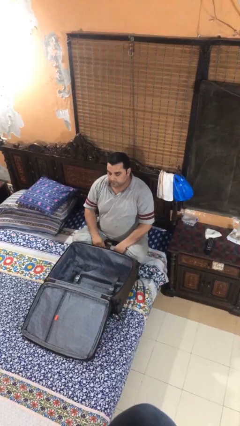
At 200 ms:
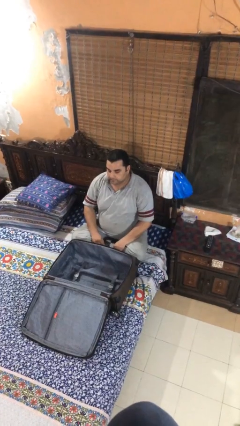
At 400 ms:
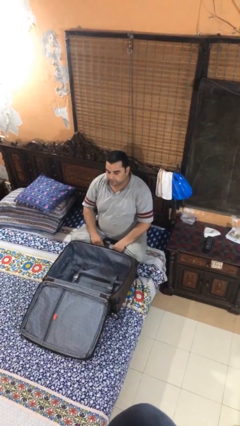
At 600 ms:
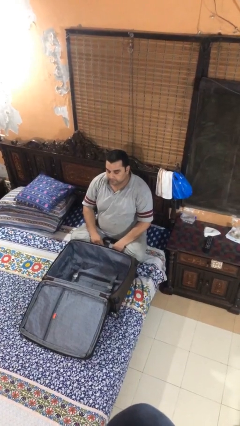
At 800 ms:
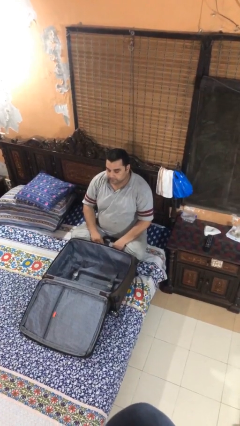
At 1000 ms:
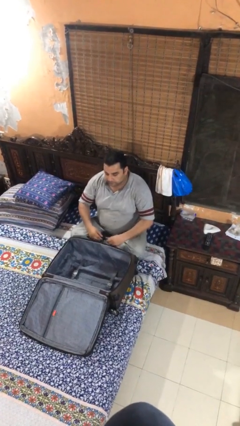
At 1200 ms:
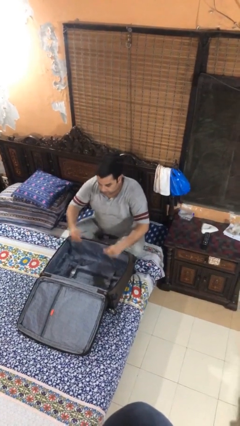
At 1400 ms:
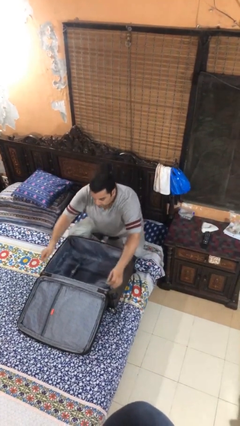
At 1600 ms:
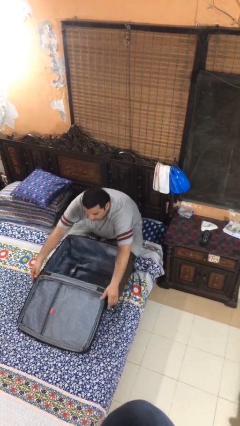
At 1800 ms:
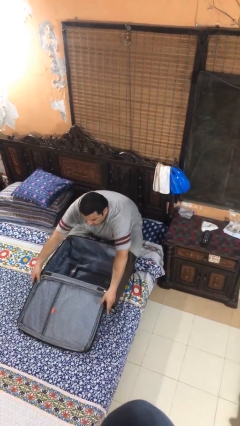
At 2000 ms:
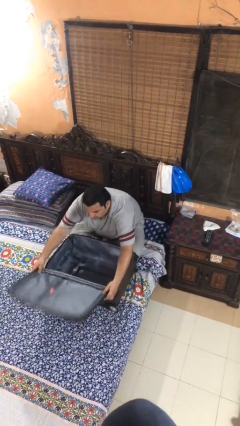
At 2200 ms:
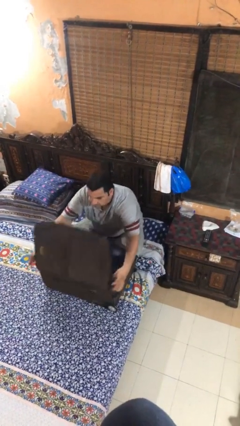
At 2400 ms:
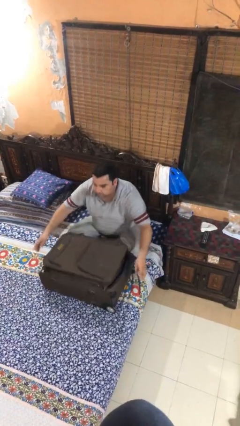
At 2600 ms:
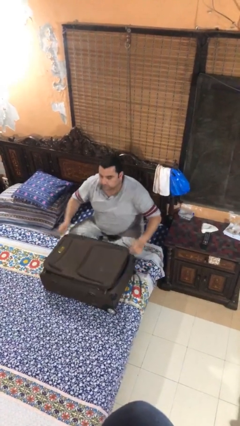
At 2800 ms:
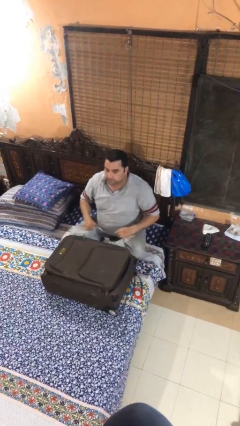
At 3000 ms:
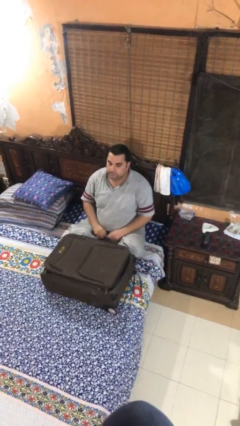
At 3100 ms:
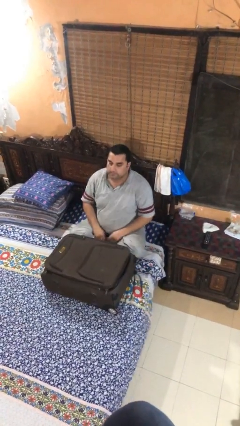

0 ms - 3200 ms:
person closes suitcase

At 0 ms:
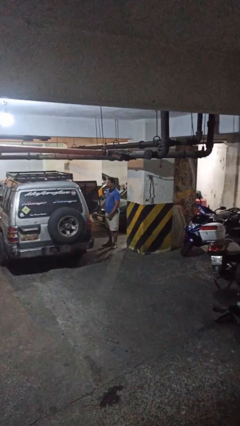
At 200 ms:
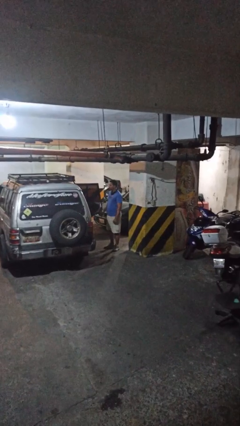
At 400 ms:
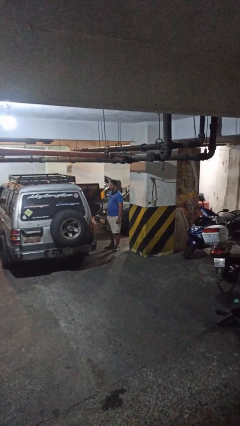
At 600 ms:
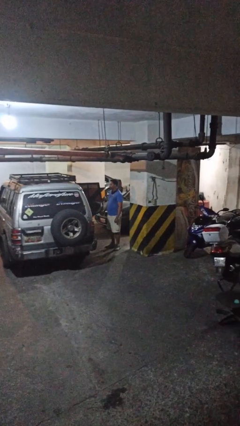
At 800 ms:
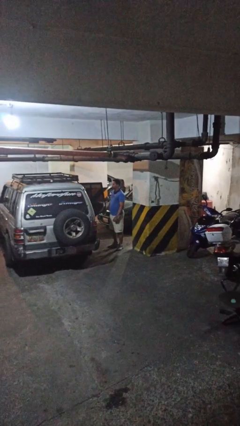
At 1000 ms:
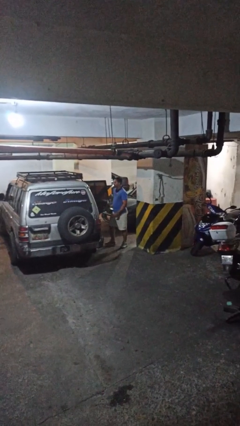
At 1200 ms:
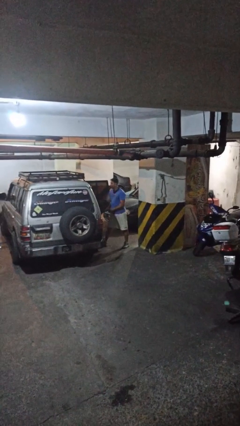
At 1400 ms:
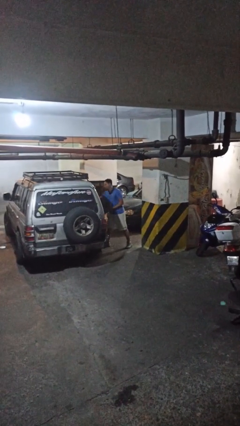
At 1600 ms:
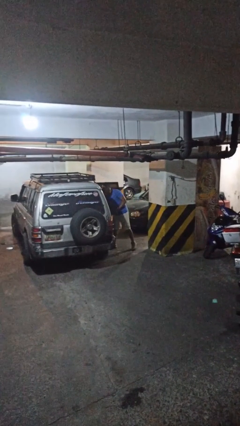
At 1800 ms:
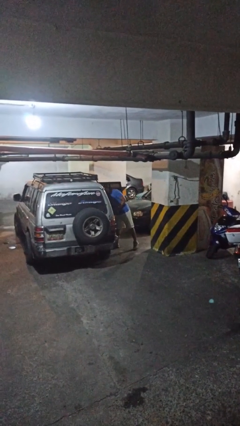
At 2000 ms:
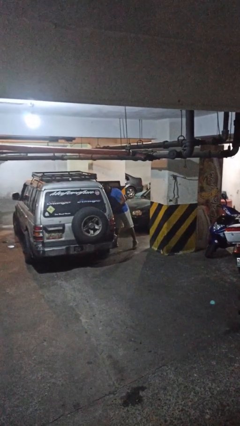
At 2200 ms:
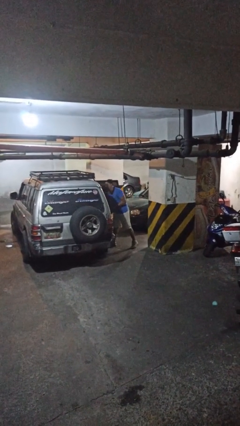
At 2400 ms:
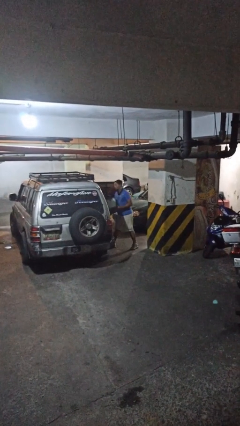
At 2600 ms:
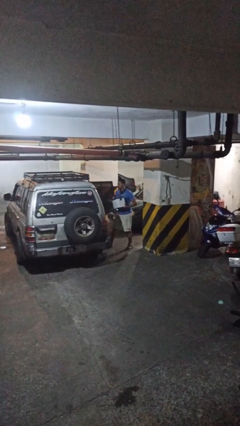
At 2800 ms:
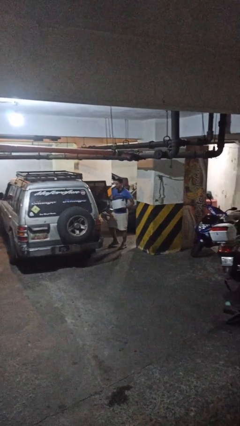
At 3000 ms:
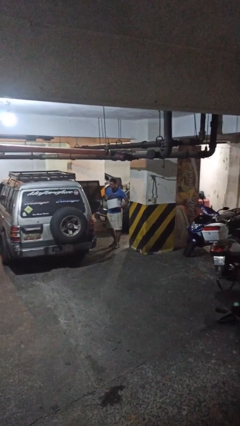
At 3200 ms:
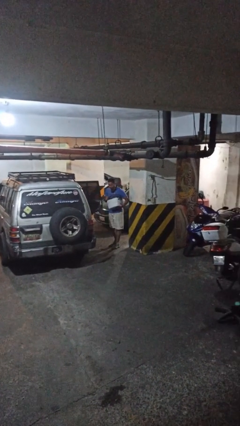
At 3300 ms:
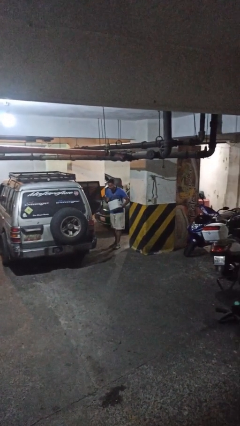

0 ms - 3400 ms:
person unloads car

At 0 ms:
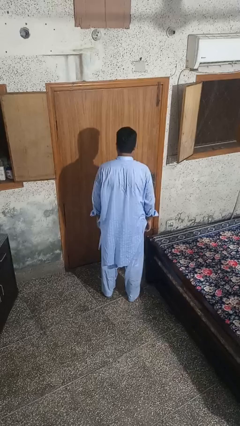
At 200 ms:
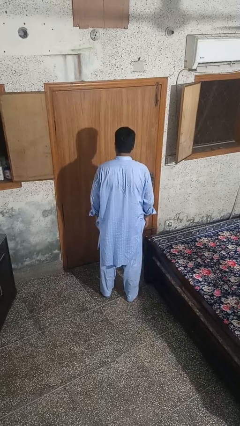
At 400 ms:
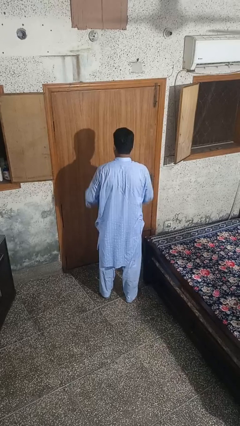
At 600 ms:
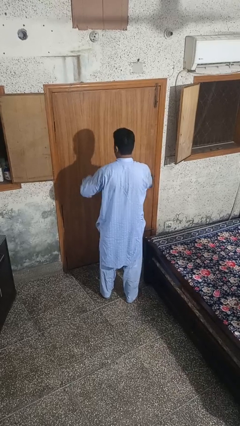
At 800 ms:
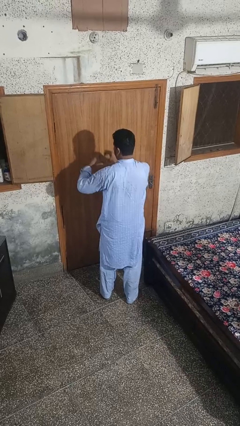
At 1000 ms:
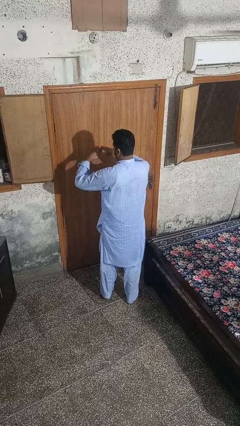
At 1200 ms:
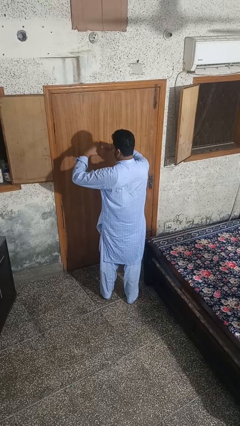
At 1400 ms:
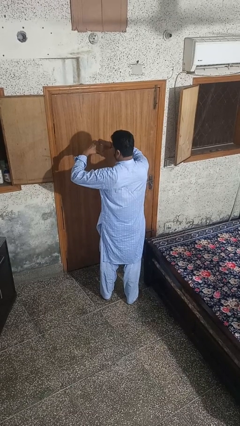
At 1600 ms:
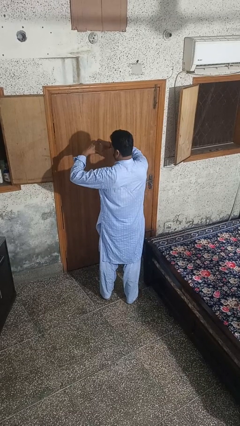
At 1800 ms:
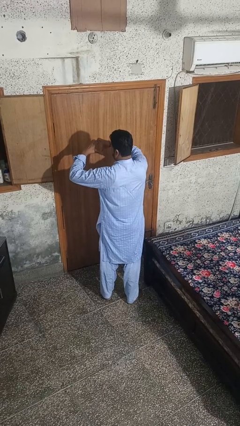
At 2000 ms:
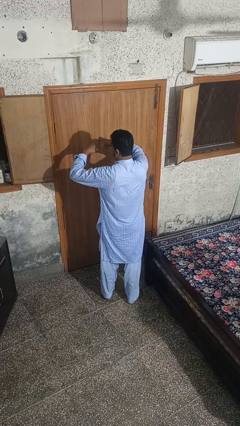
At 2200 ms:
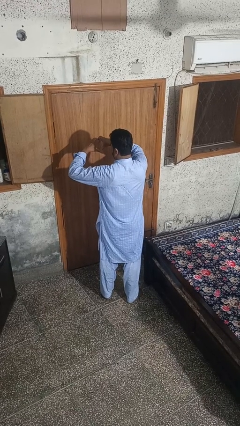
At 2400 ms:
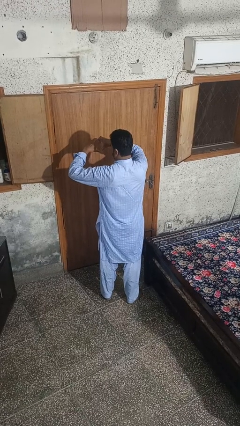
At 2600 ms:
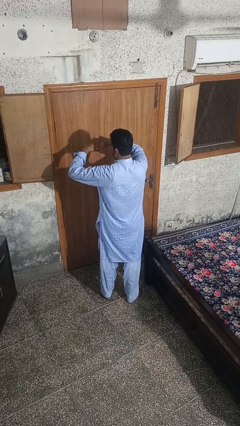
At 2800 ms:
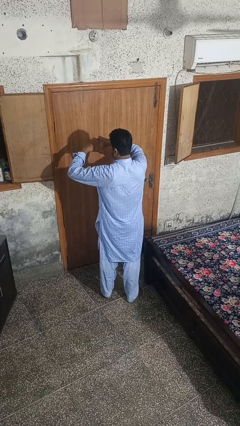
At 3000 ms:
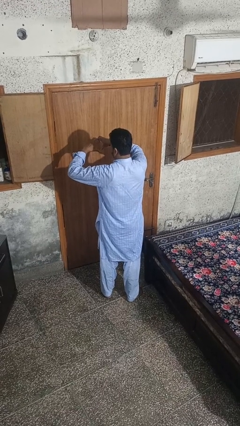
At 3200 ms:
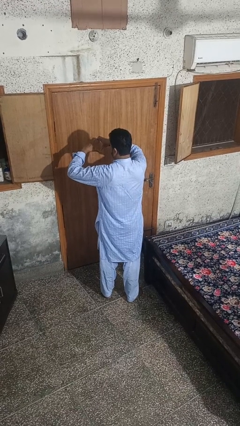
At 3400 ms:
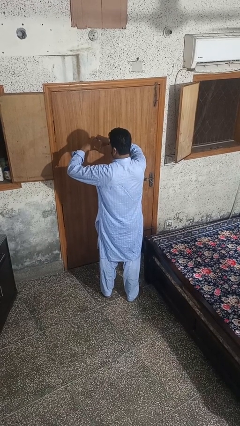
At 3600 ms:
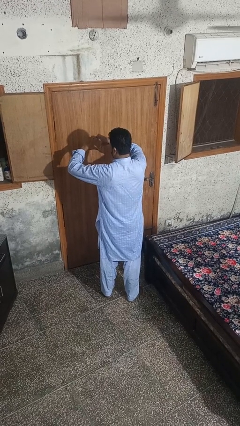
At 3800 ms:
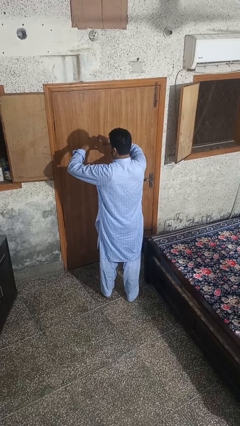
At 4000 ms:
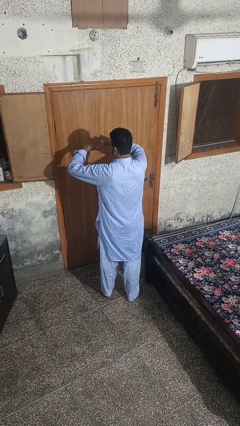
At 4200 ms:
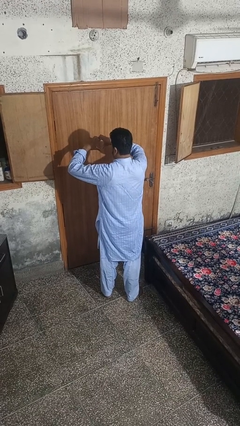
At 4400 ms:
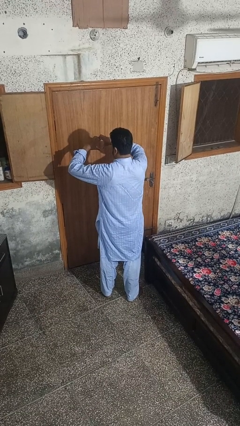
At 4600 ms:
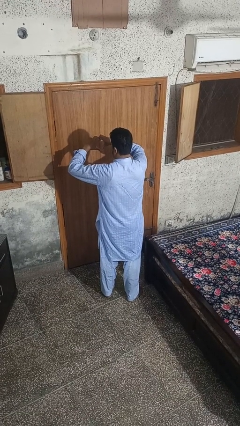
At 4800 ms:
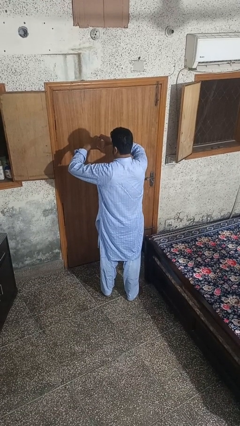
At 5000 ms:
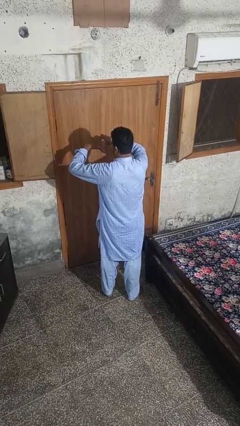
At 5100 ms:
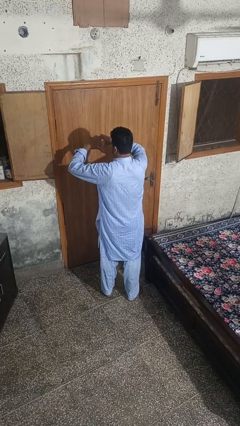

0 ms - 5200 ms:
person gestures heart

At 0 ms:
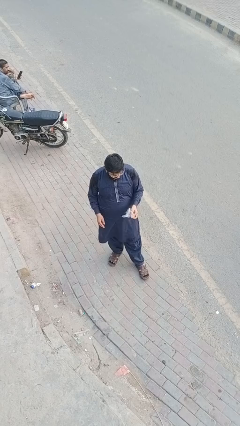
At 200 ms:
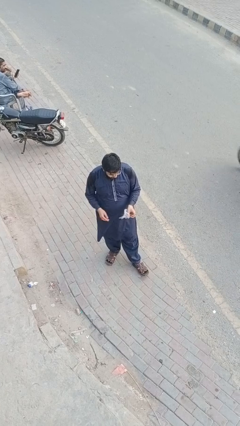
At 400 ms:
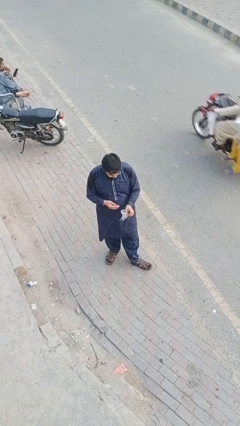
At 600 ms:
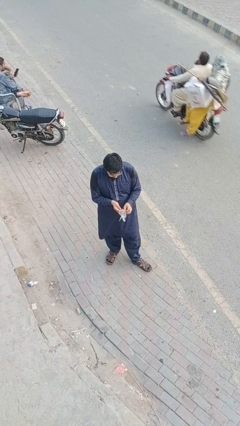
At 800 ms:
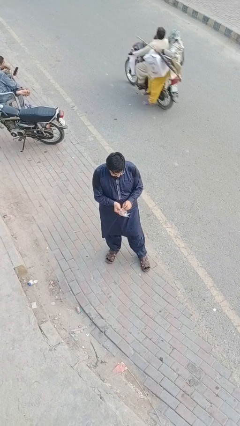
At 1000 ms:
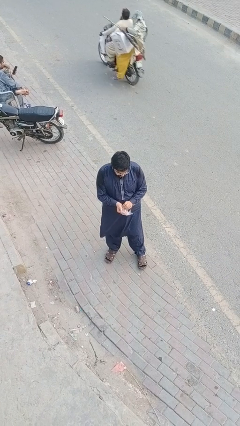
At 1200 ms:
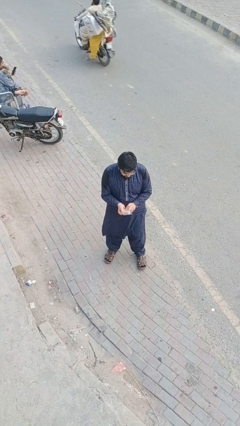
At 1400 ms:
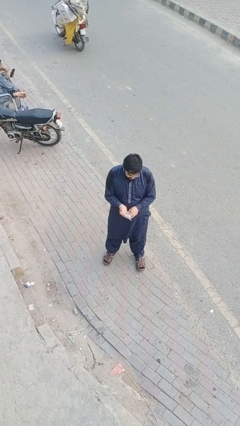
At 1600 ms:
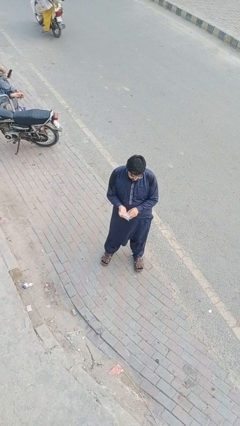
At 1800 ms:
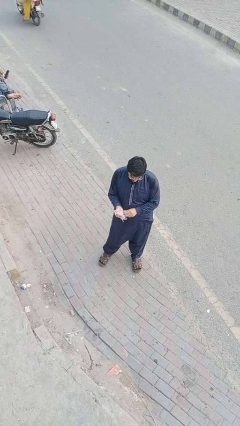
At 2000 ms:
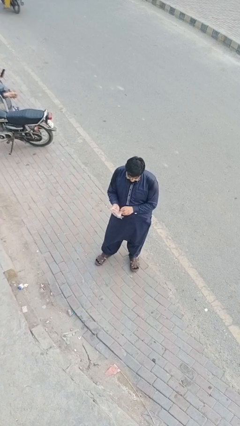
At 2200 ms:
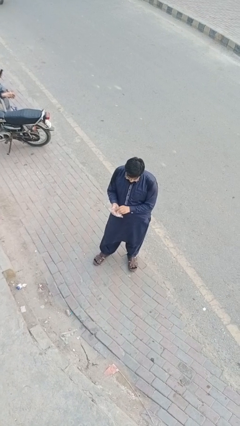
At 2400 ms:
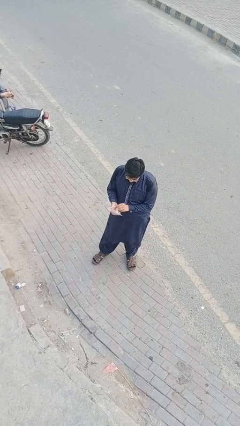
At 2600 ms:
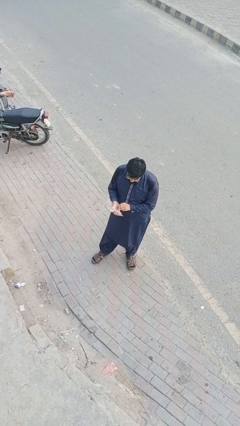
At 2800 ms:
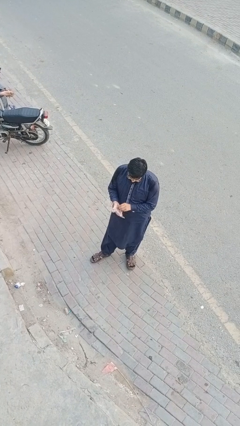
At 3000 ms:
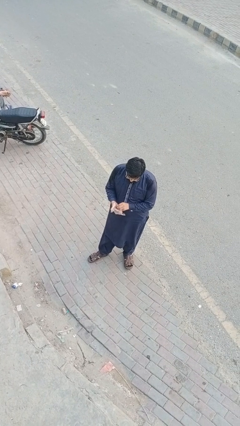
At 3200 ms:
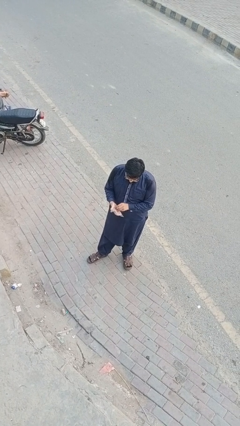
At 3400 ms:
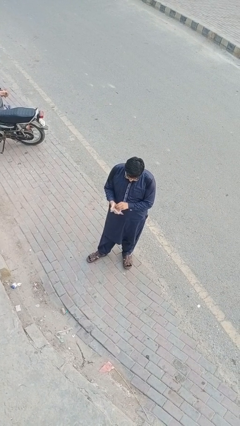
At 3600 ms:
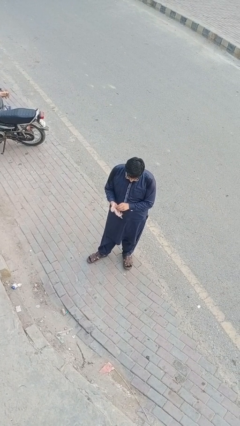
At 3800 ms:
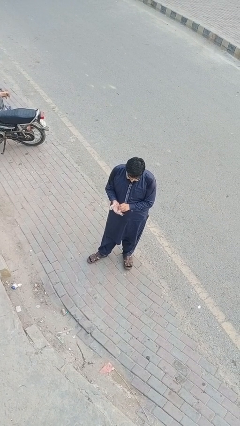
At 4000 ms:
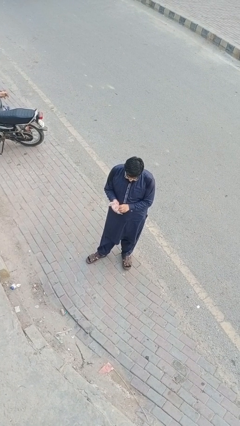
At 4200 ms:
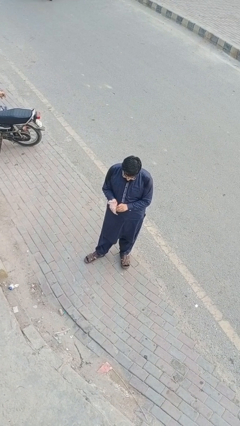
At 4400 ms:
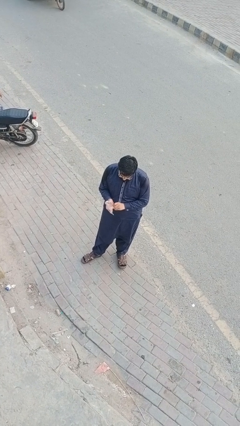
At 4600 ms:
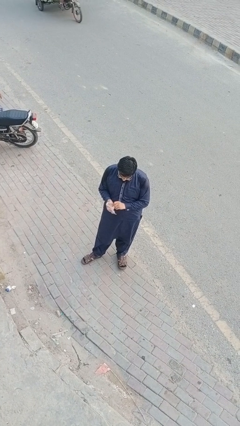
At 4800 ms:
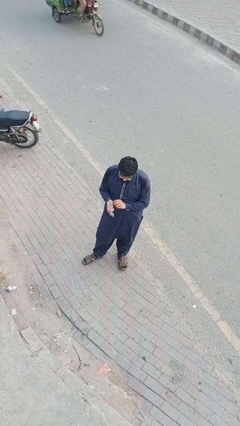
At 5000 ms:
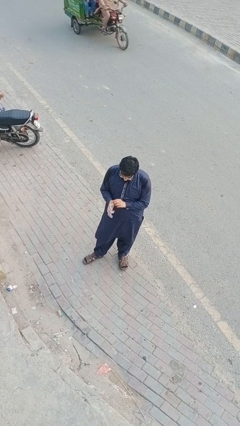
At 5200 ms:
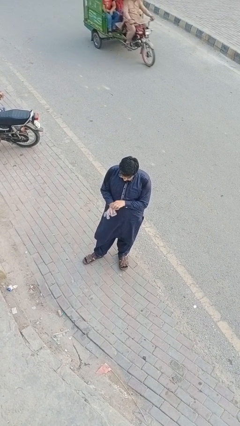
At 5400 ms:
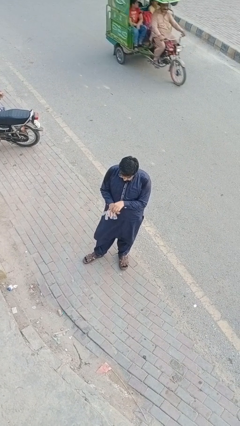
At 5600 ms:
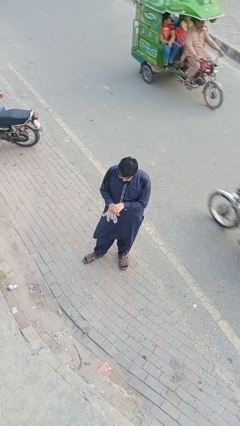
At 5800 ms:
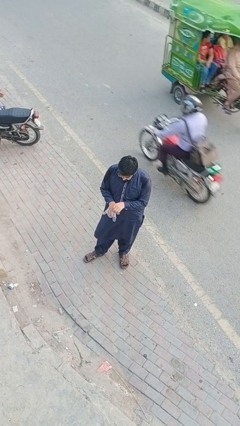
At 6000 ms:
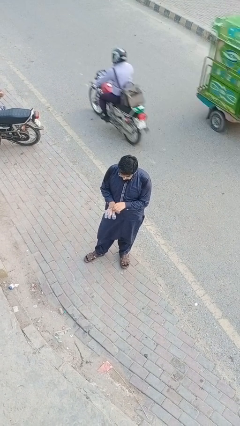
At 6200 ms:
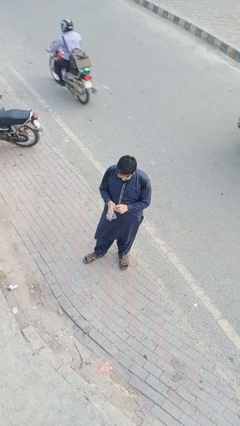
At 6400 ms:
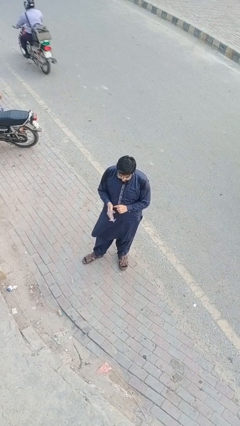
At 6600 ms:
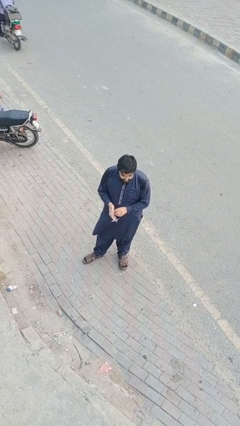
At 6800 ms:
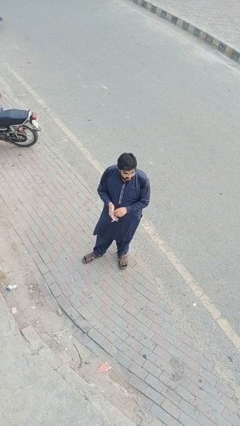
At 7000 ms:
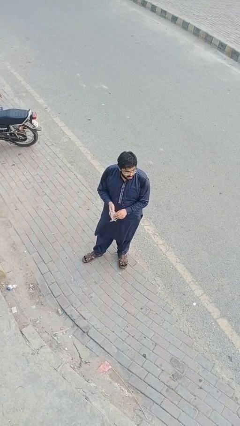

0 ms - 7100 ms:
person puts on gloves
